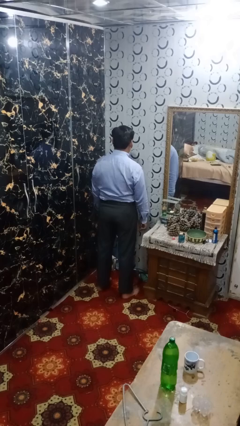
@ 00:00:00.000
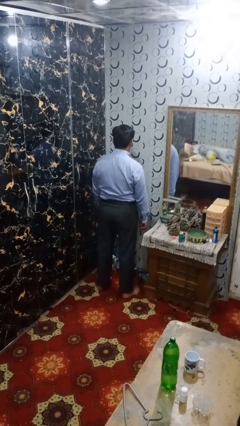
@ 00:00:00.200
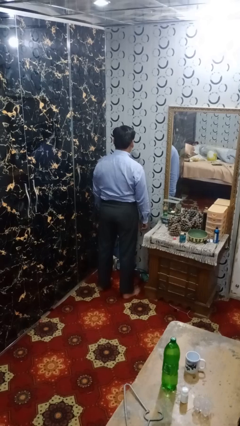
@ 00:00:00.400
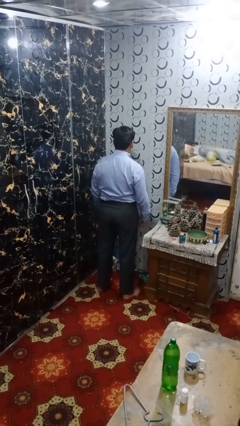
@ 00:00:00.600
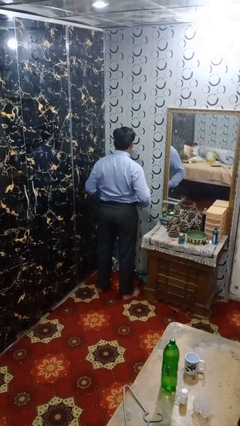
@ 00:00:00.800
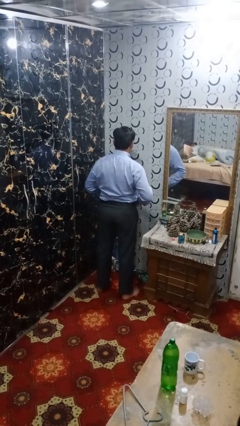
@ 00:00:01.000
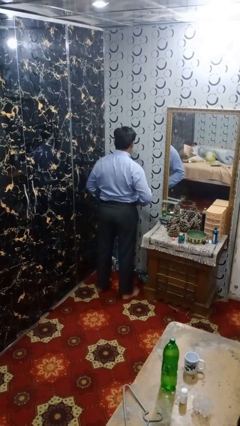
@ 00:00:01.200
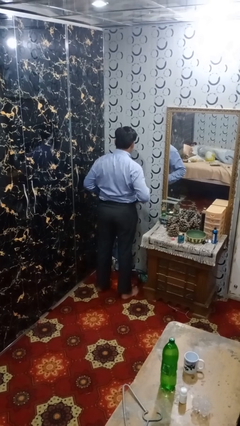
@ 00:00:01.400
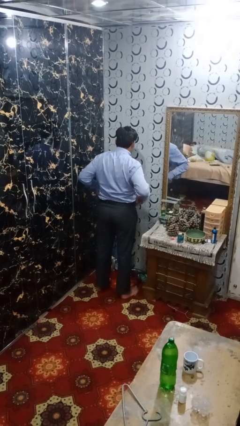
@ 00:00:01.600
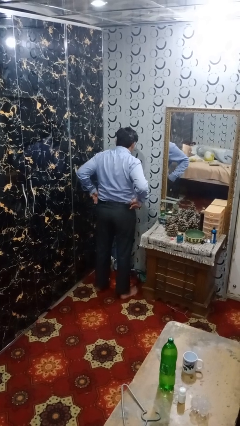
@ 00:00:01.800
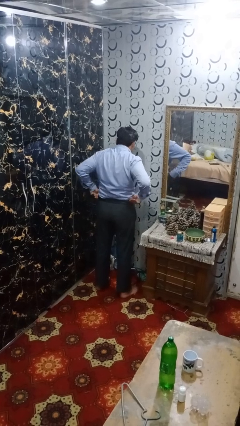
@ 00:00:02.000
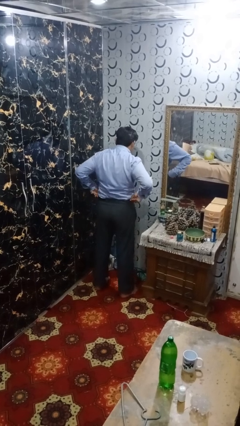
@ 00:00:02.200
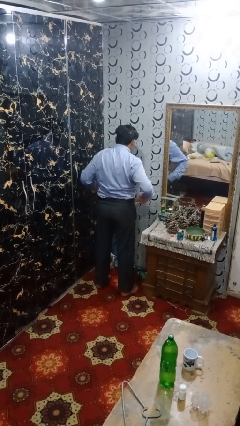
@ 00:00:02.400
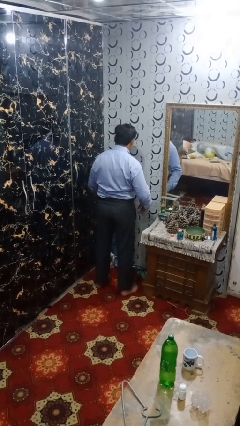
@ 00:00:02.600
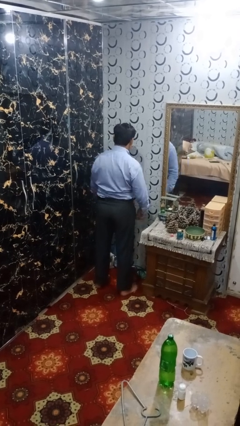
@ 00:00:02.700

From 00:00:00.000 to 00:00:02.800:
person hikes up pants

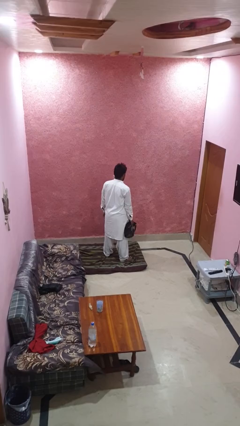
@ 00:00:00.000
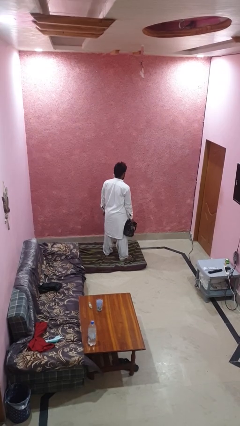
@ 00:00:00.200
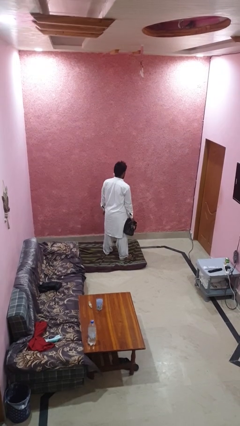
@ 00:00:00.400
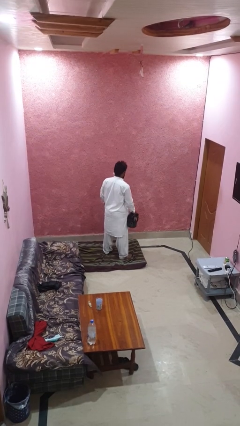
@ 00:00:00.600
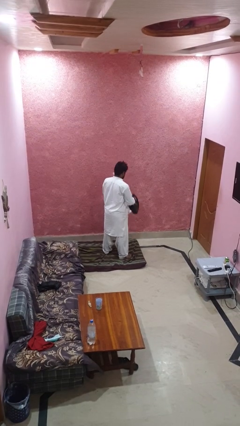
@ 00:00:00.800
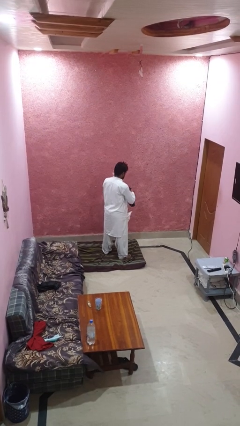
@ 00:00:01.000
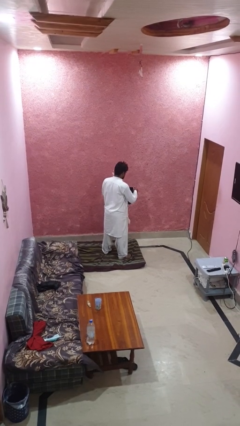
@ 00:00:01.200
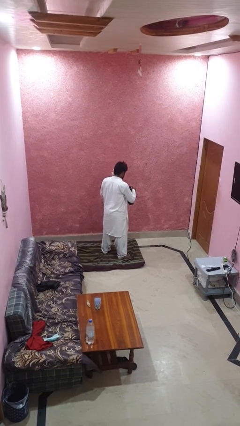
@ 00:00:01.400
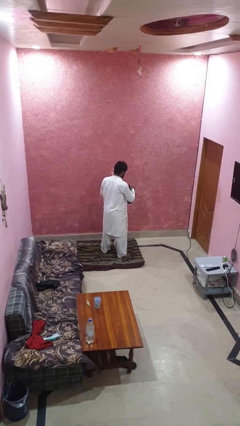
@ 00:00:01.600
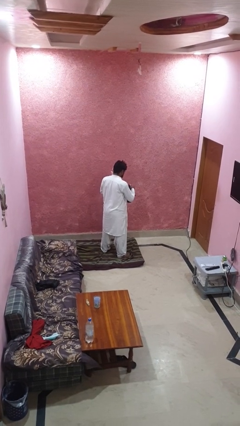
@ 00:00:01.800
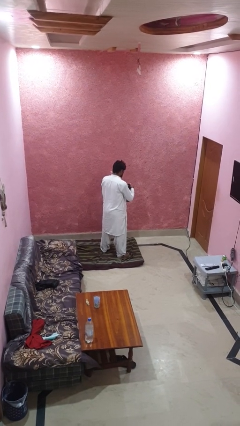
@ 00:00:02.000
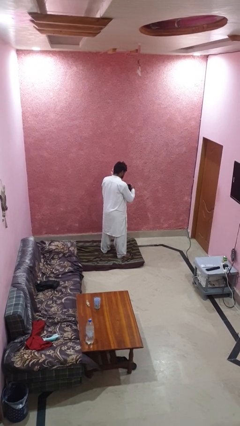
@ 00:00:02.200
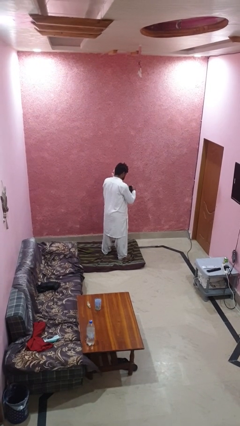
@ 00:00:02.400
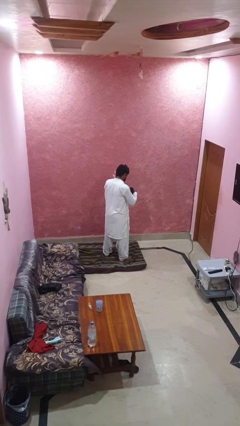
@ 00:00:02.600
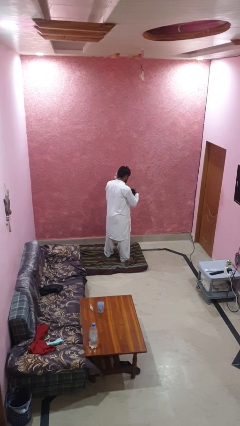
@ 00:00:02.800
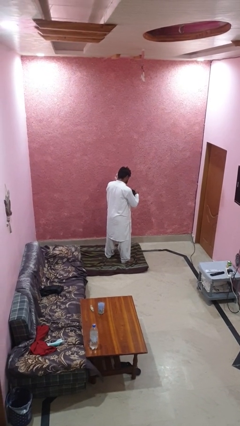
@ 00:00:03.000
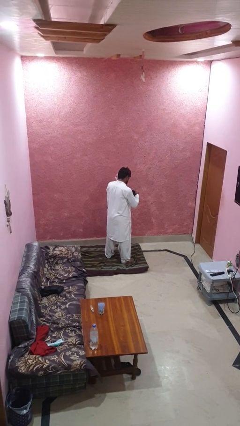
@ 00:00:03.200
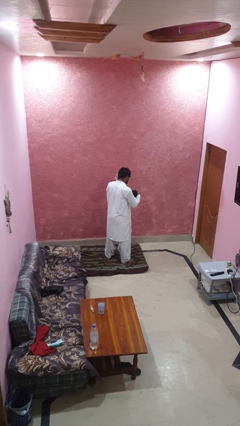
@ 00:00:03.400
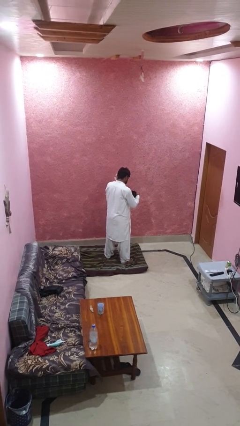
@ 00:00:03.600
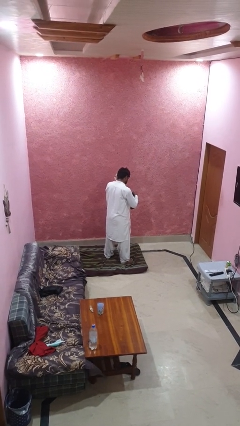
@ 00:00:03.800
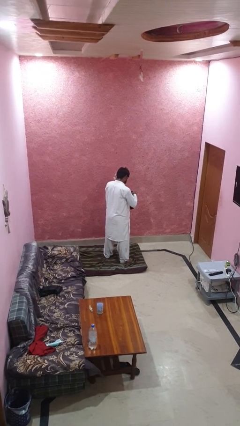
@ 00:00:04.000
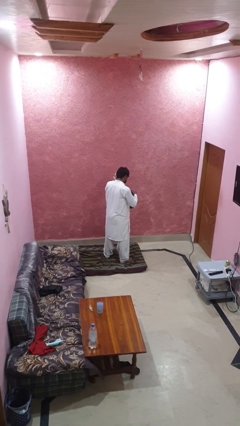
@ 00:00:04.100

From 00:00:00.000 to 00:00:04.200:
person searches in purse

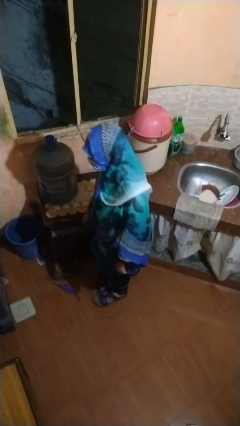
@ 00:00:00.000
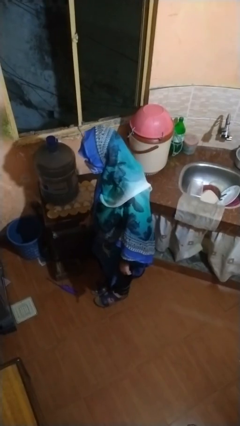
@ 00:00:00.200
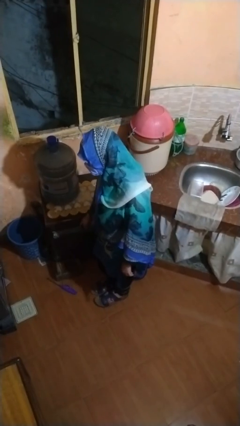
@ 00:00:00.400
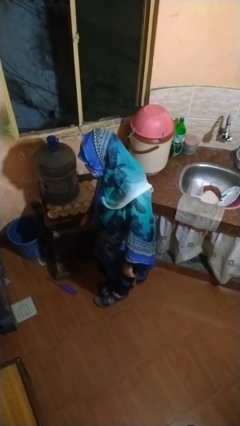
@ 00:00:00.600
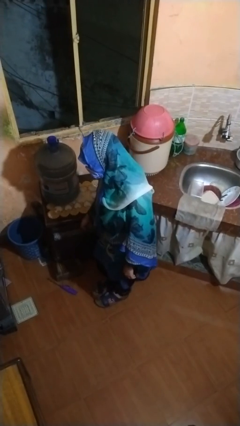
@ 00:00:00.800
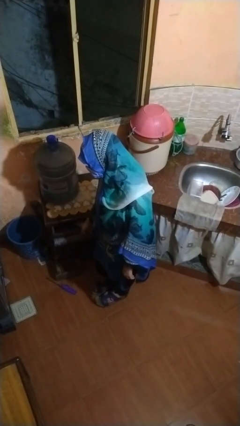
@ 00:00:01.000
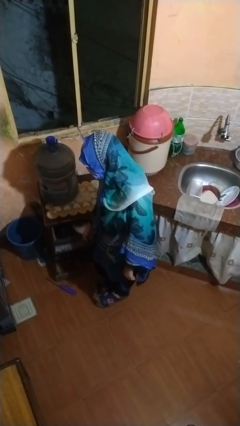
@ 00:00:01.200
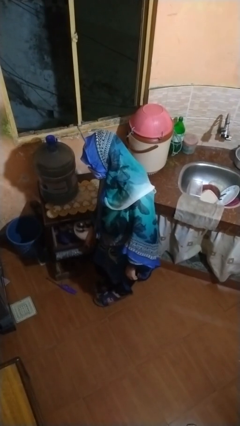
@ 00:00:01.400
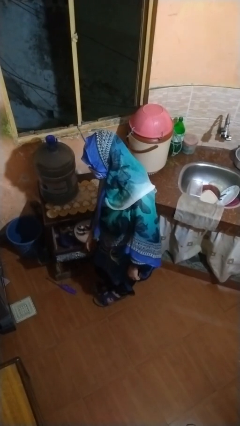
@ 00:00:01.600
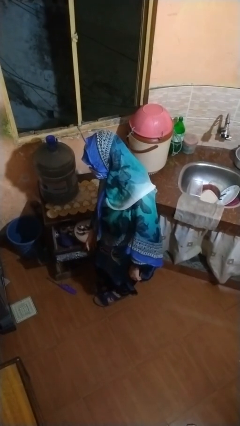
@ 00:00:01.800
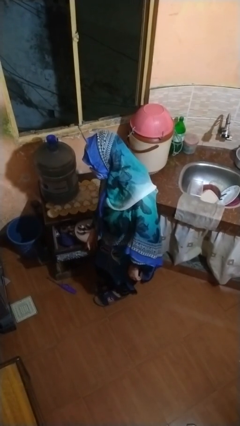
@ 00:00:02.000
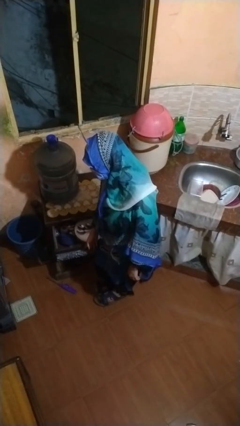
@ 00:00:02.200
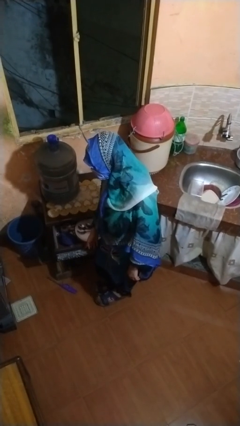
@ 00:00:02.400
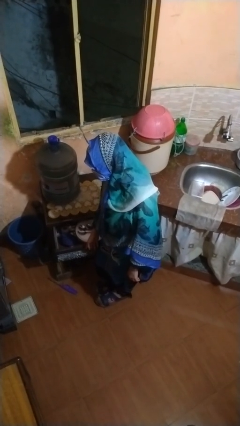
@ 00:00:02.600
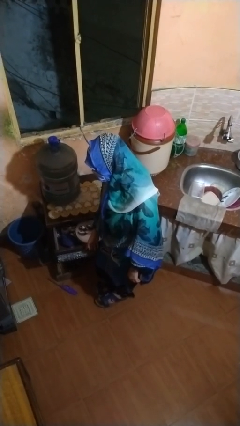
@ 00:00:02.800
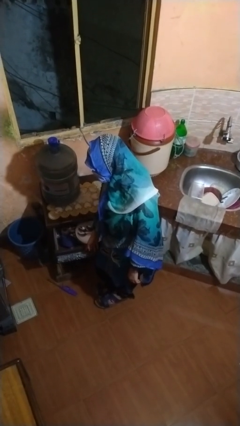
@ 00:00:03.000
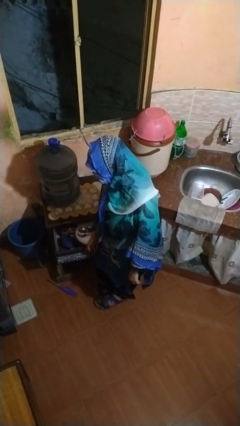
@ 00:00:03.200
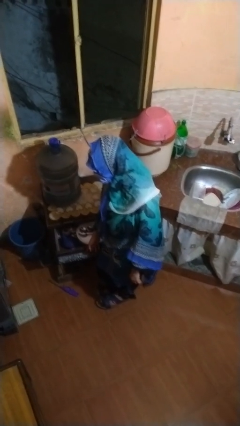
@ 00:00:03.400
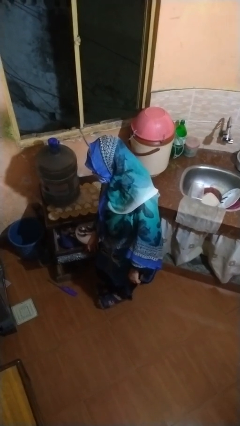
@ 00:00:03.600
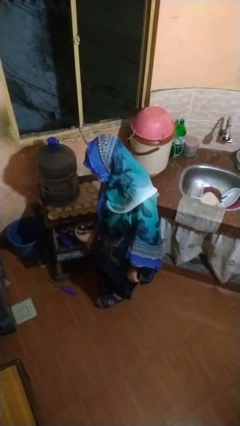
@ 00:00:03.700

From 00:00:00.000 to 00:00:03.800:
person opens kitchen drawer

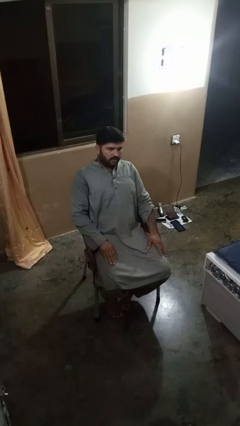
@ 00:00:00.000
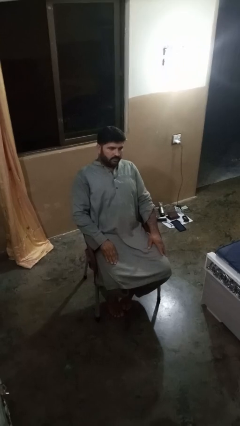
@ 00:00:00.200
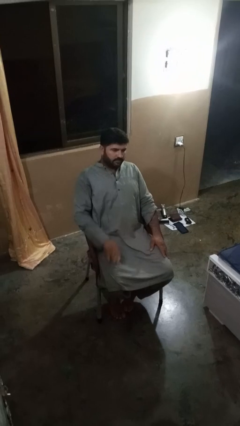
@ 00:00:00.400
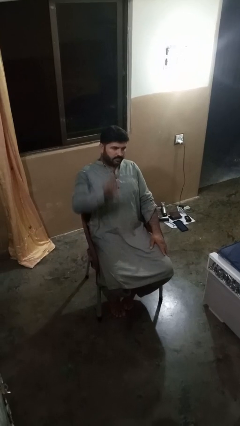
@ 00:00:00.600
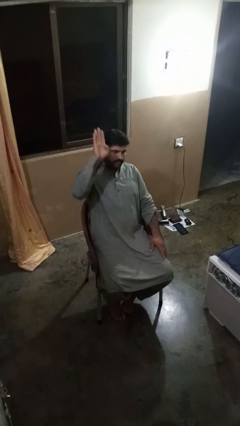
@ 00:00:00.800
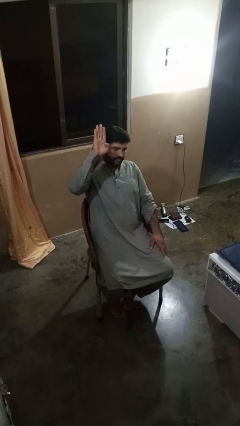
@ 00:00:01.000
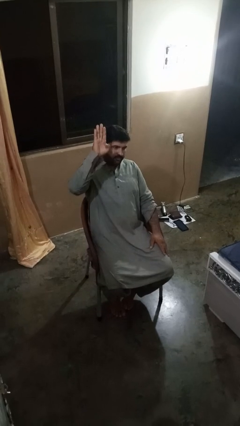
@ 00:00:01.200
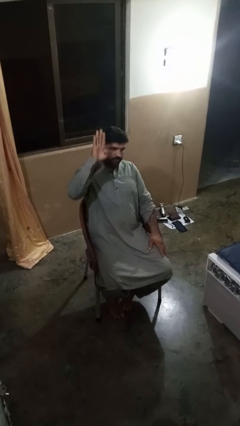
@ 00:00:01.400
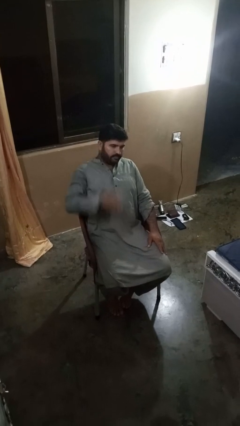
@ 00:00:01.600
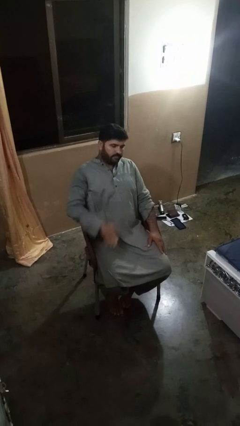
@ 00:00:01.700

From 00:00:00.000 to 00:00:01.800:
person gestures number four

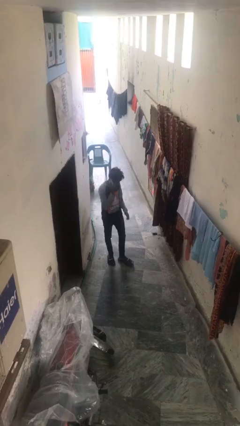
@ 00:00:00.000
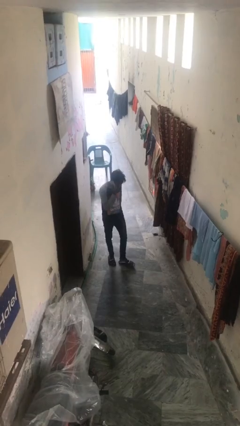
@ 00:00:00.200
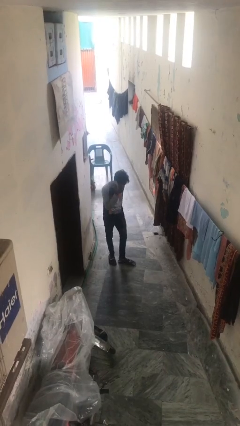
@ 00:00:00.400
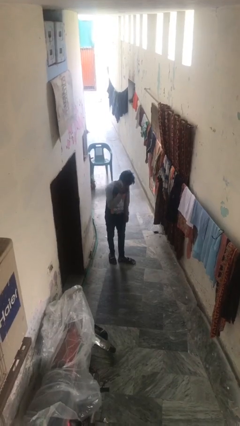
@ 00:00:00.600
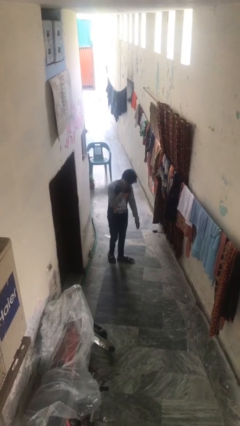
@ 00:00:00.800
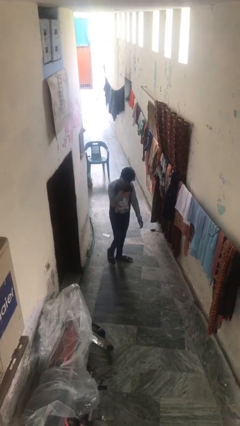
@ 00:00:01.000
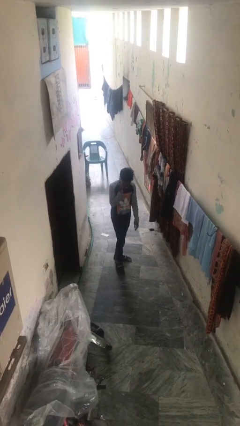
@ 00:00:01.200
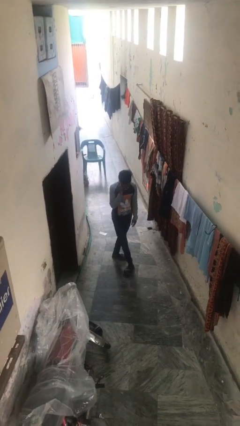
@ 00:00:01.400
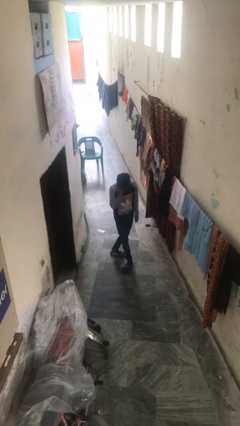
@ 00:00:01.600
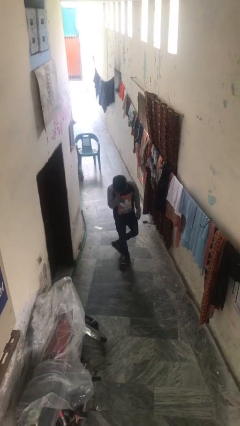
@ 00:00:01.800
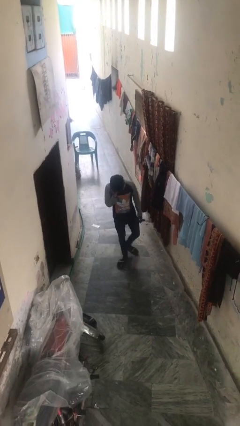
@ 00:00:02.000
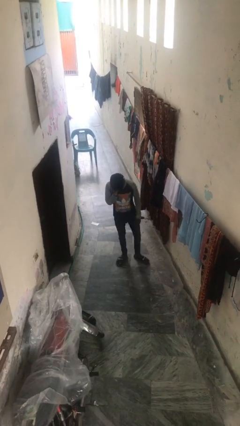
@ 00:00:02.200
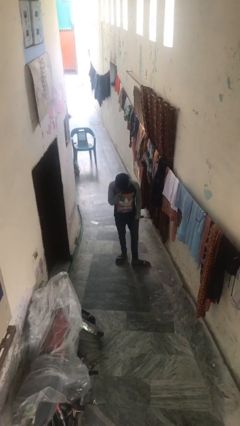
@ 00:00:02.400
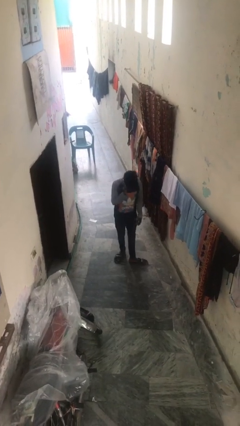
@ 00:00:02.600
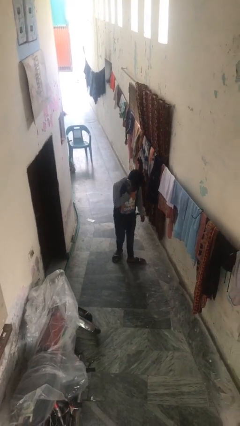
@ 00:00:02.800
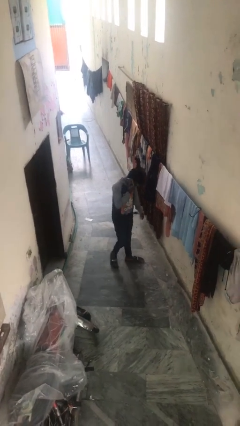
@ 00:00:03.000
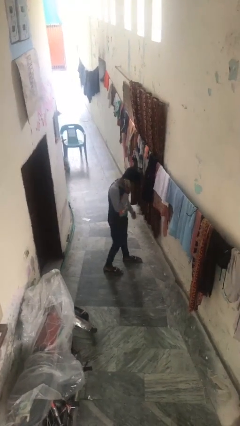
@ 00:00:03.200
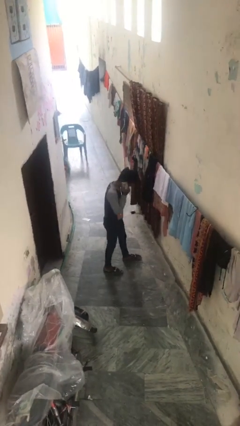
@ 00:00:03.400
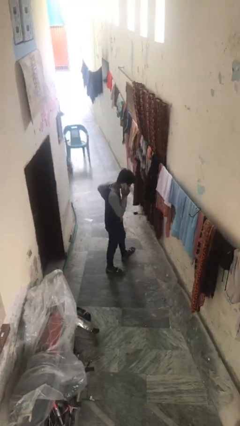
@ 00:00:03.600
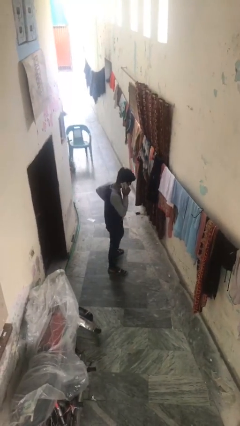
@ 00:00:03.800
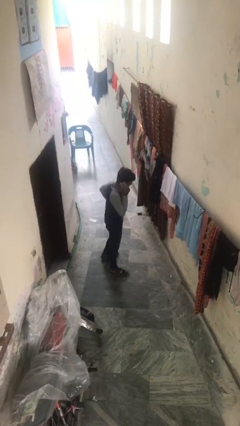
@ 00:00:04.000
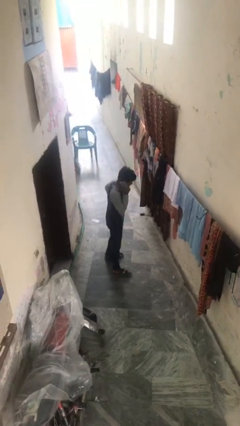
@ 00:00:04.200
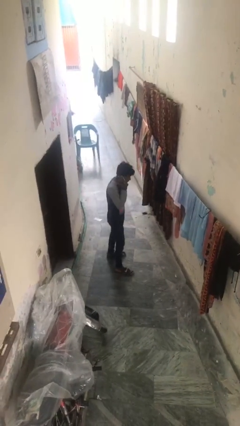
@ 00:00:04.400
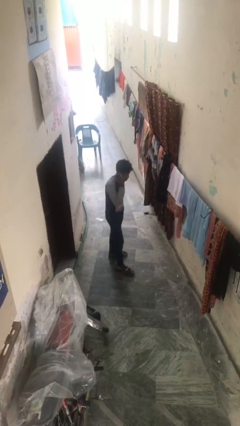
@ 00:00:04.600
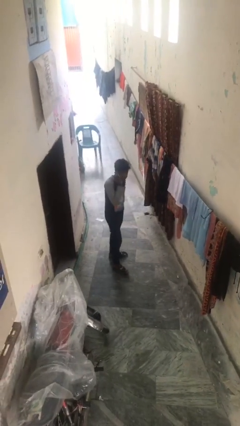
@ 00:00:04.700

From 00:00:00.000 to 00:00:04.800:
person talks on phone
